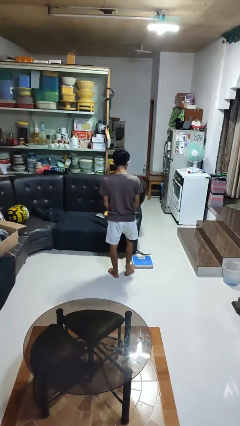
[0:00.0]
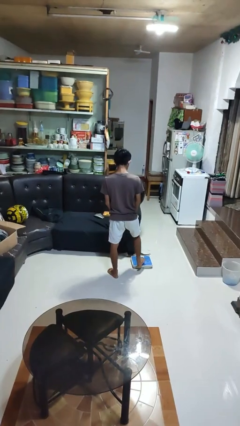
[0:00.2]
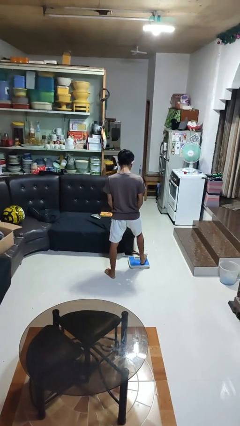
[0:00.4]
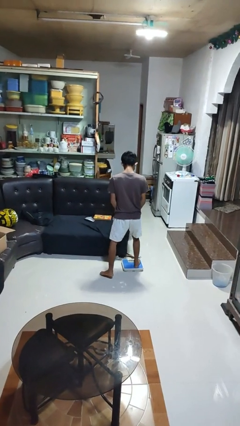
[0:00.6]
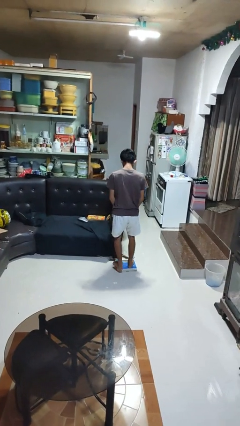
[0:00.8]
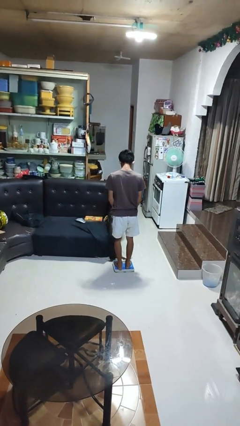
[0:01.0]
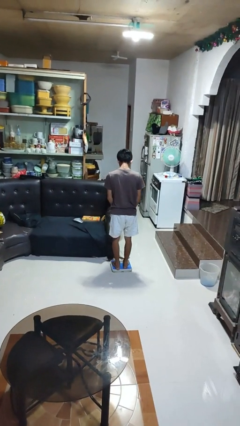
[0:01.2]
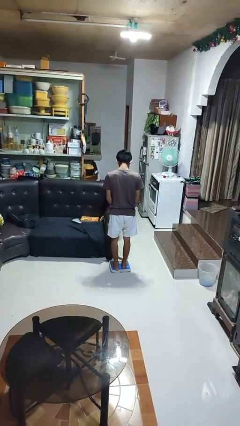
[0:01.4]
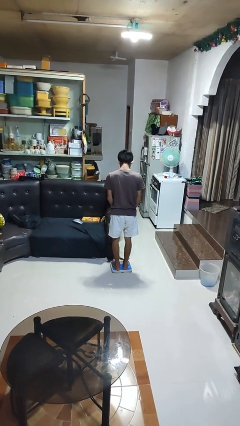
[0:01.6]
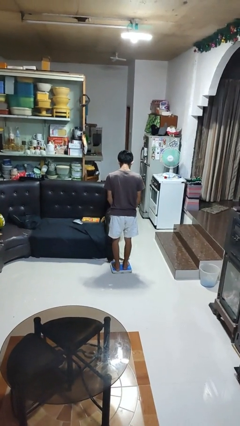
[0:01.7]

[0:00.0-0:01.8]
person uses bodyweight scale

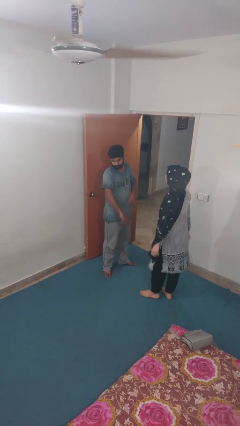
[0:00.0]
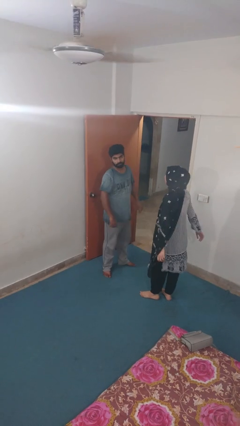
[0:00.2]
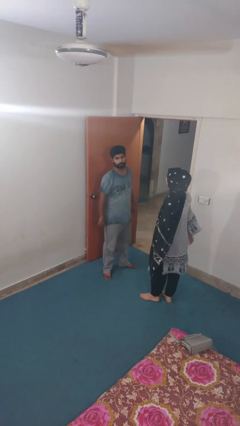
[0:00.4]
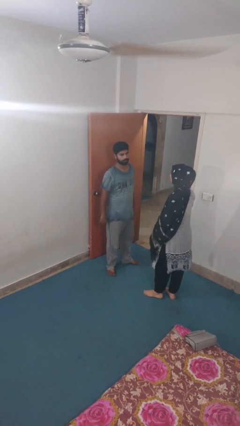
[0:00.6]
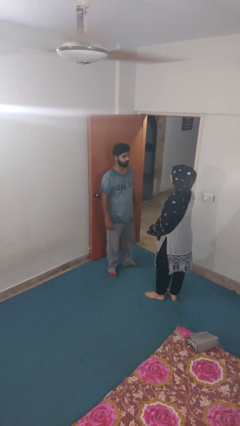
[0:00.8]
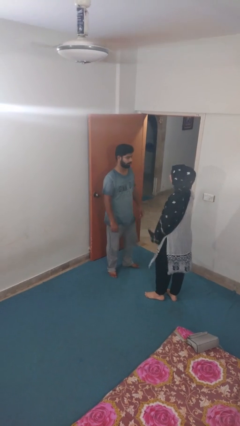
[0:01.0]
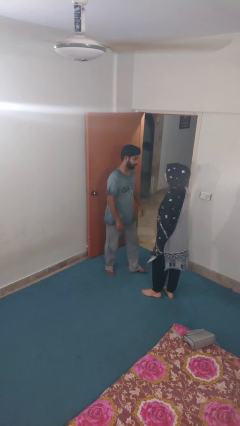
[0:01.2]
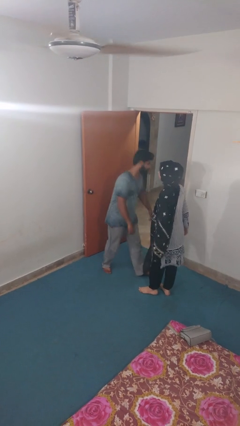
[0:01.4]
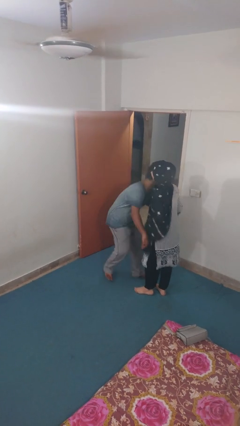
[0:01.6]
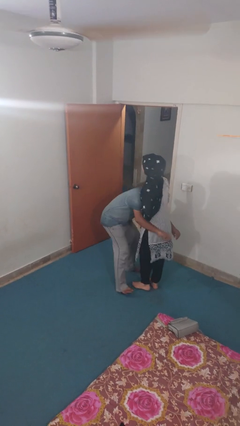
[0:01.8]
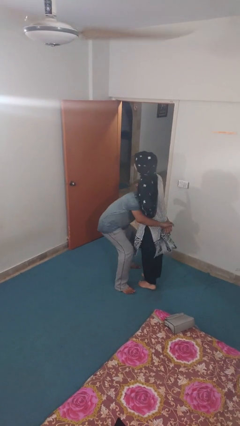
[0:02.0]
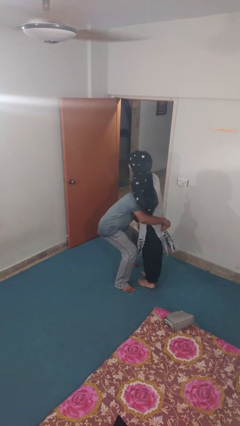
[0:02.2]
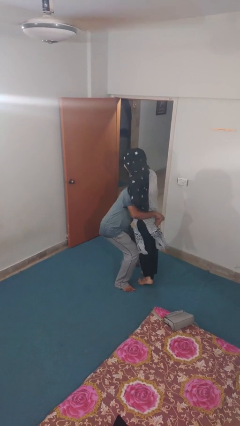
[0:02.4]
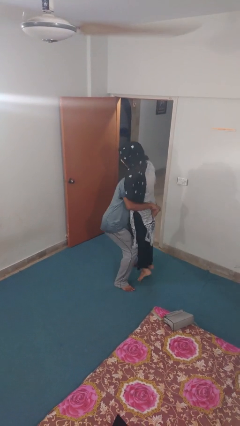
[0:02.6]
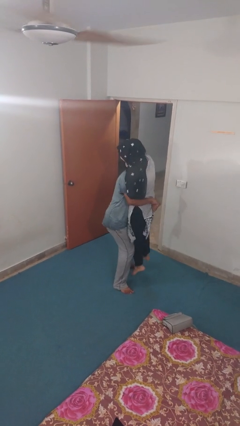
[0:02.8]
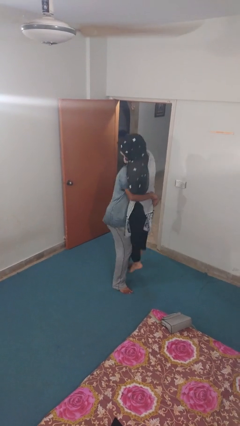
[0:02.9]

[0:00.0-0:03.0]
person picks up person

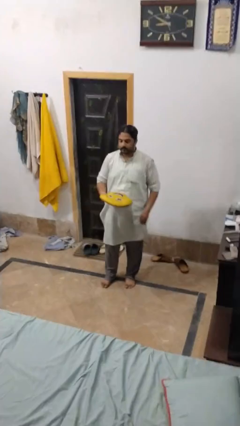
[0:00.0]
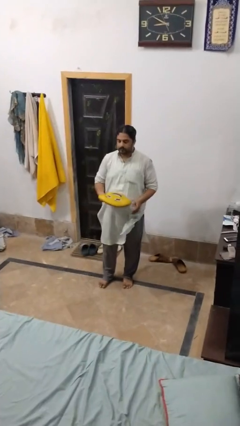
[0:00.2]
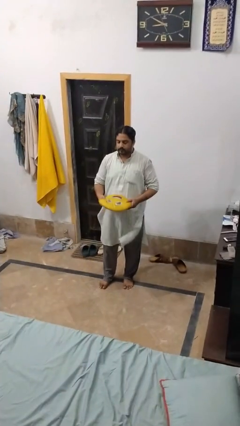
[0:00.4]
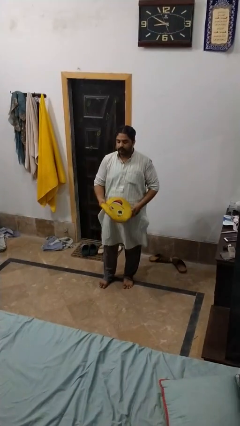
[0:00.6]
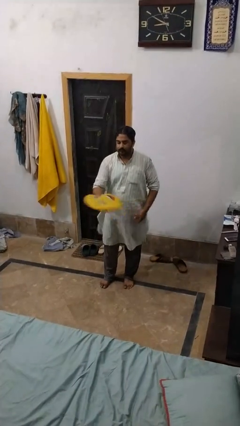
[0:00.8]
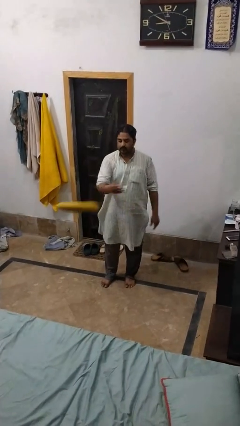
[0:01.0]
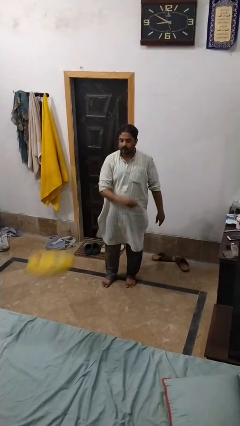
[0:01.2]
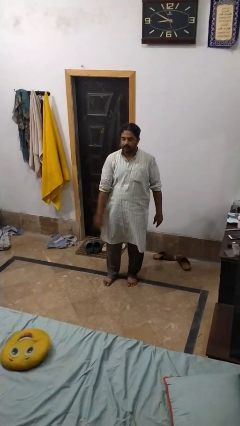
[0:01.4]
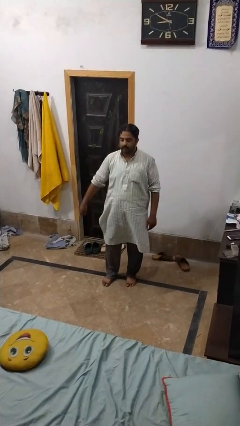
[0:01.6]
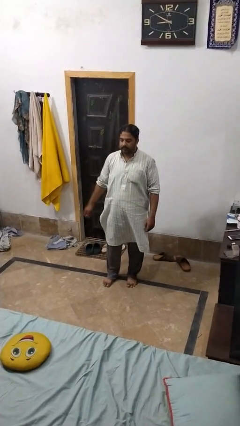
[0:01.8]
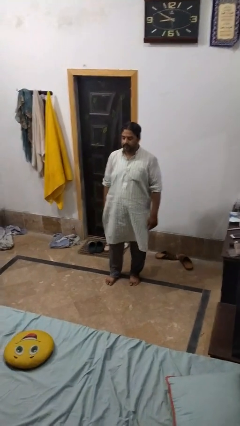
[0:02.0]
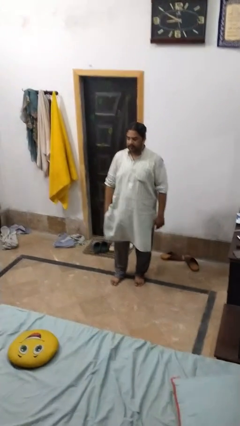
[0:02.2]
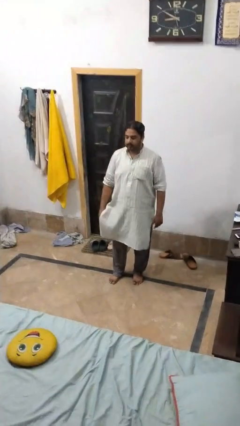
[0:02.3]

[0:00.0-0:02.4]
person throws object on bed

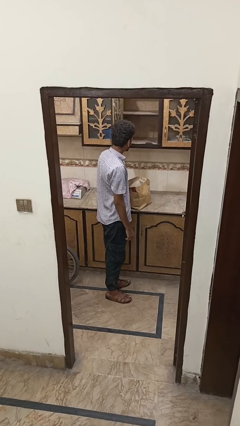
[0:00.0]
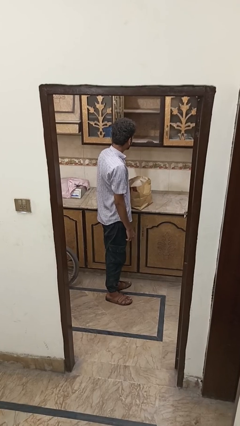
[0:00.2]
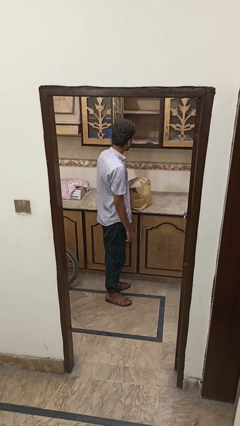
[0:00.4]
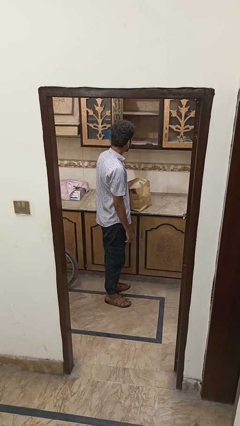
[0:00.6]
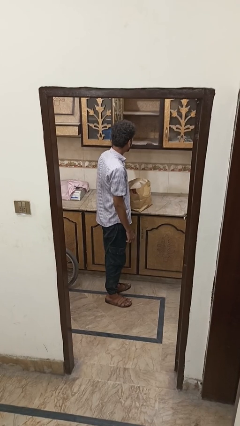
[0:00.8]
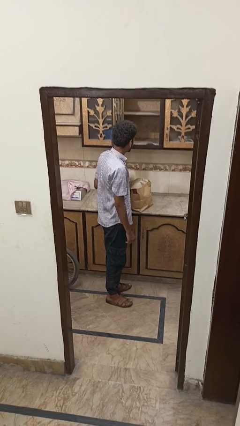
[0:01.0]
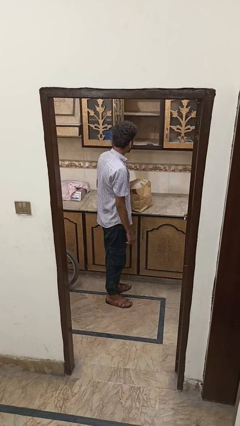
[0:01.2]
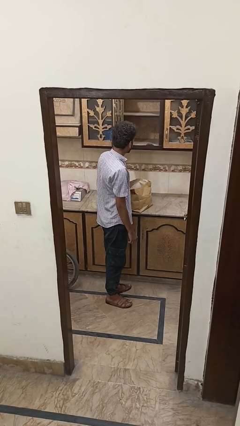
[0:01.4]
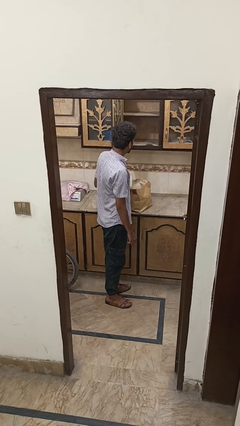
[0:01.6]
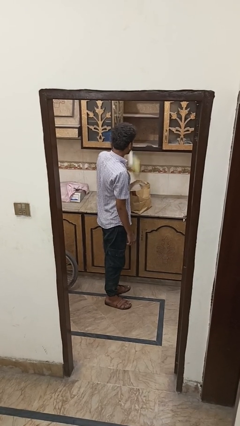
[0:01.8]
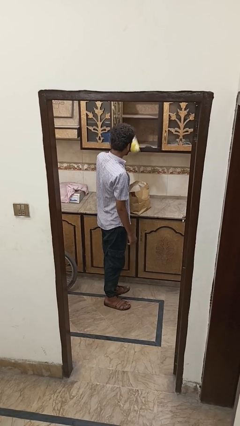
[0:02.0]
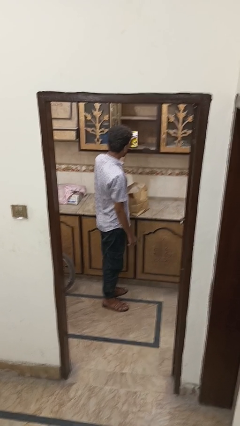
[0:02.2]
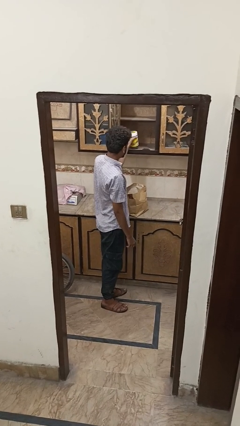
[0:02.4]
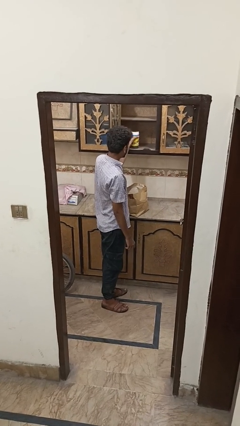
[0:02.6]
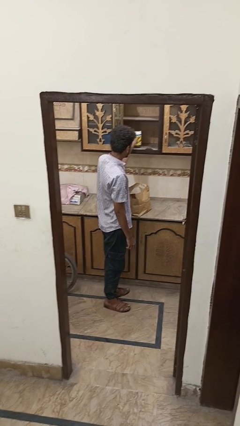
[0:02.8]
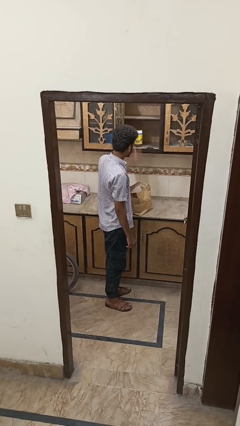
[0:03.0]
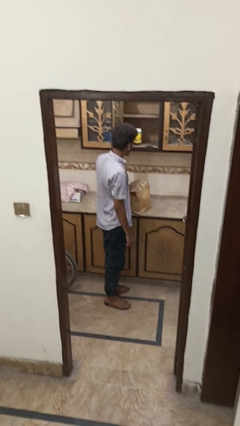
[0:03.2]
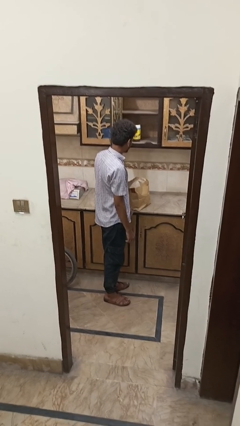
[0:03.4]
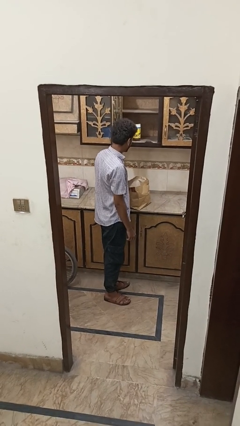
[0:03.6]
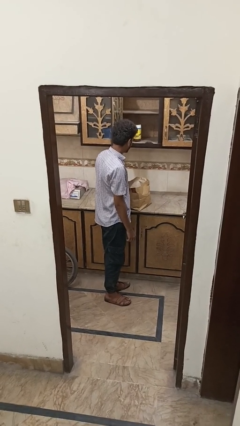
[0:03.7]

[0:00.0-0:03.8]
person covers with bedsheets

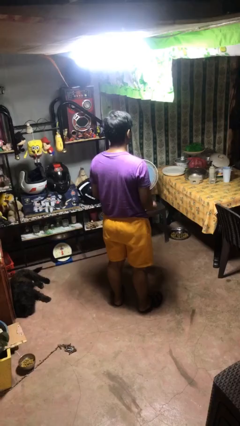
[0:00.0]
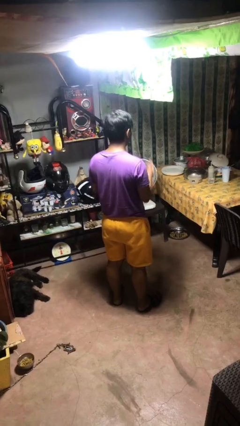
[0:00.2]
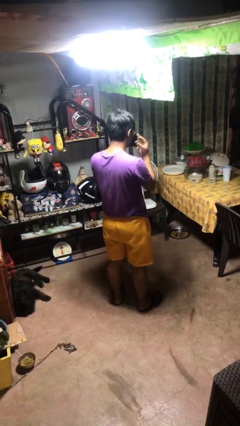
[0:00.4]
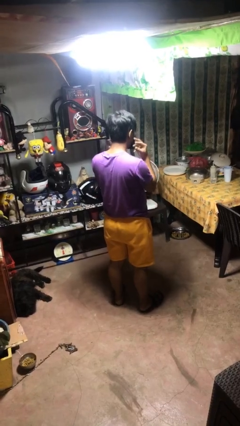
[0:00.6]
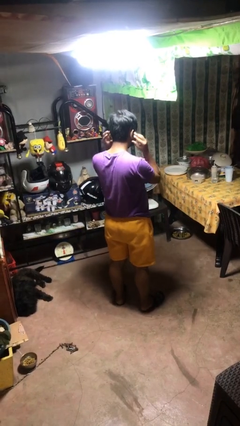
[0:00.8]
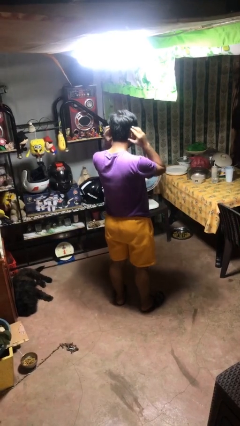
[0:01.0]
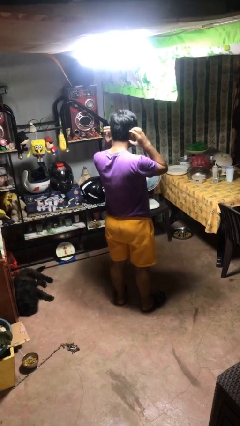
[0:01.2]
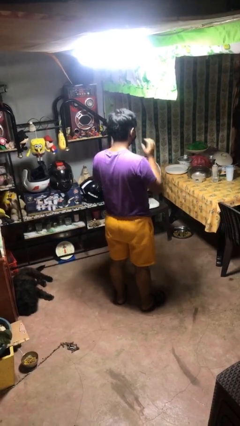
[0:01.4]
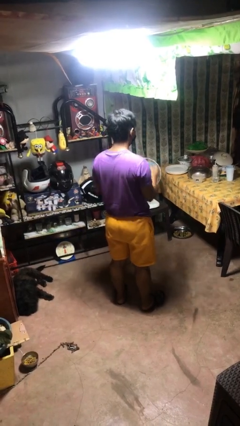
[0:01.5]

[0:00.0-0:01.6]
person puts on facemask

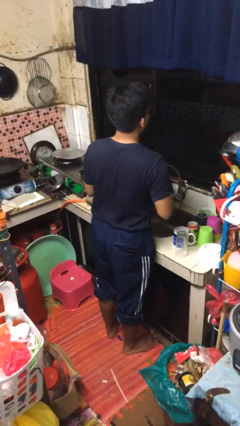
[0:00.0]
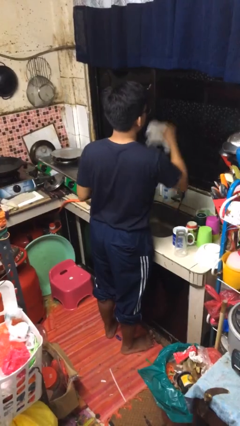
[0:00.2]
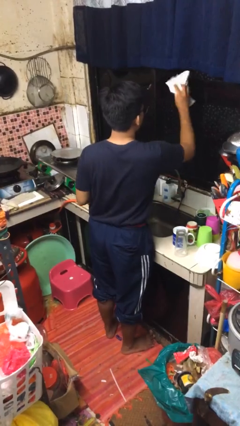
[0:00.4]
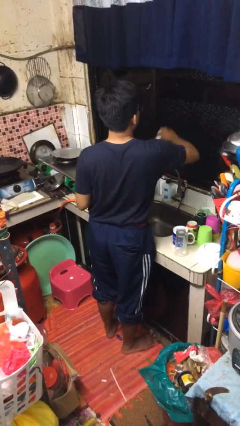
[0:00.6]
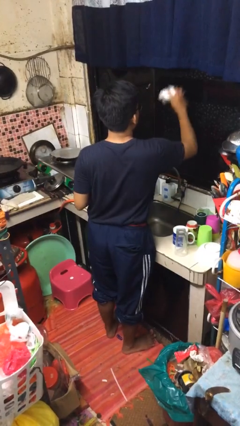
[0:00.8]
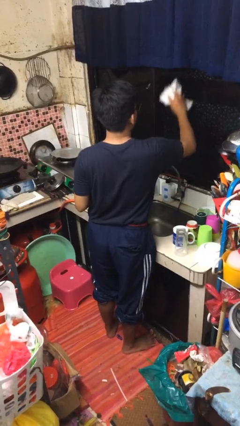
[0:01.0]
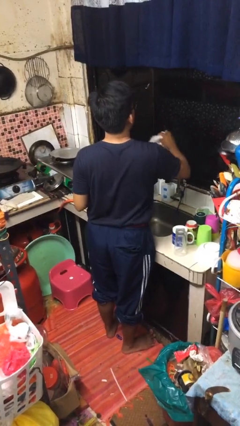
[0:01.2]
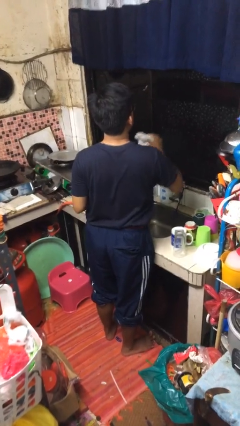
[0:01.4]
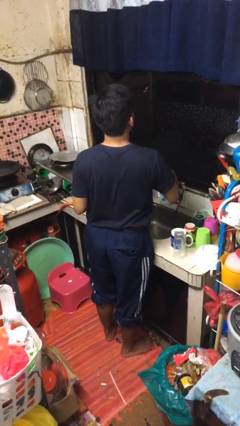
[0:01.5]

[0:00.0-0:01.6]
person washes window

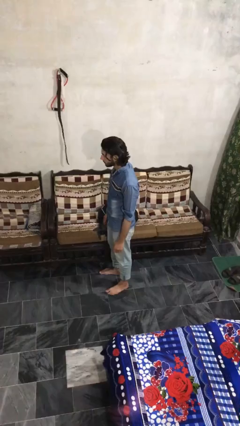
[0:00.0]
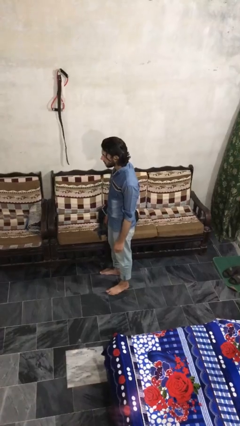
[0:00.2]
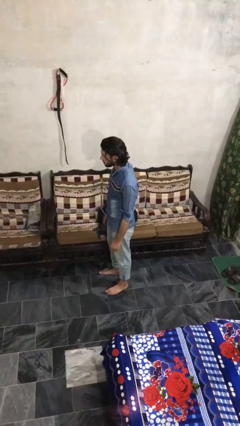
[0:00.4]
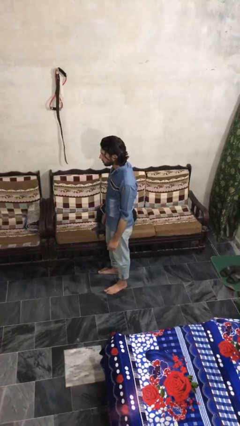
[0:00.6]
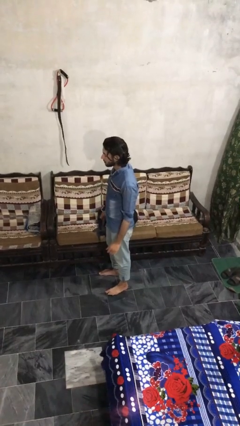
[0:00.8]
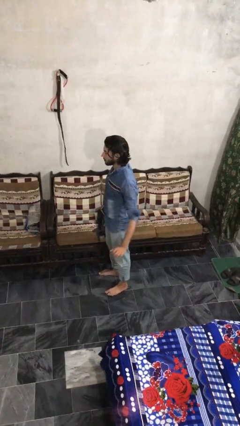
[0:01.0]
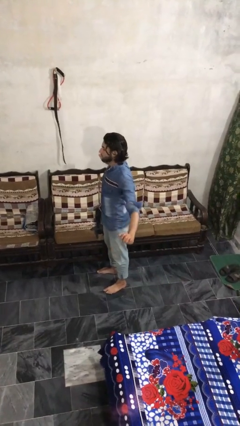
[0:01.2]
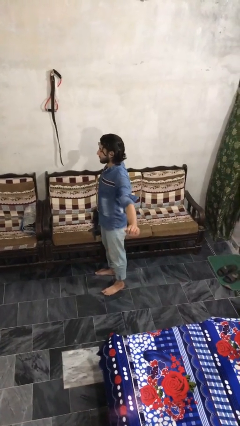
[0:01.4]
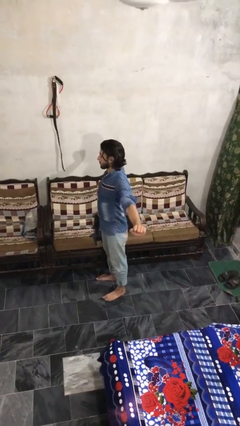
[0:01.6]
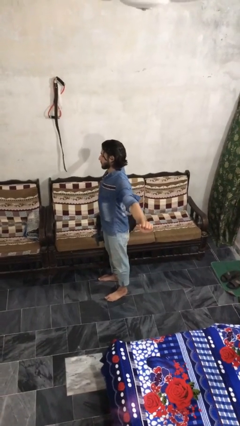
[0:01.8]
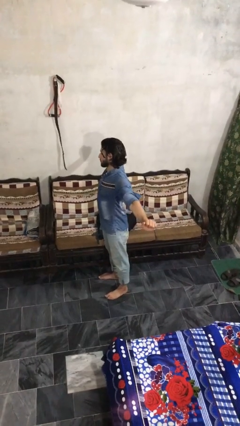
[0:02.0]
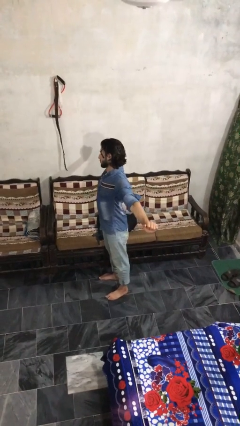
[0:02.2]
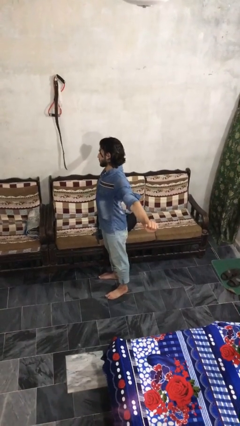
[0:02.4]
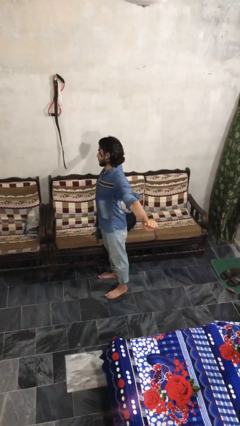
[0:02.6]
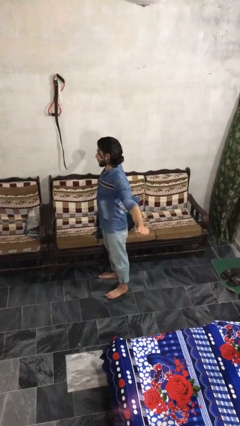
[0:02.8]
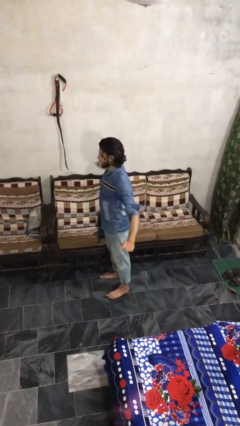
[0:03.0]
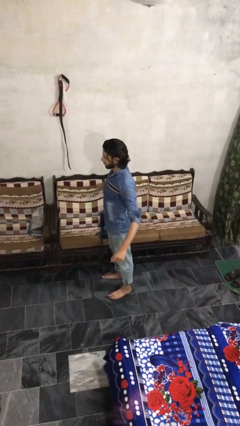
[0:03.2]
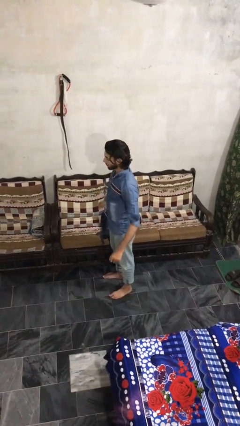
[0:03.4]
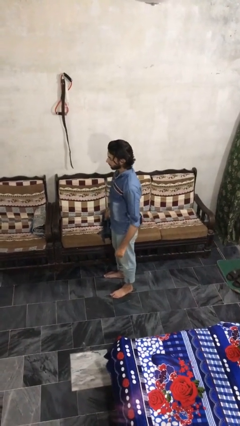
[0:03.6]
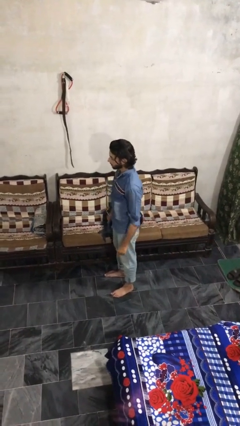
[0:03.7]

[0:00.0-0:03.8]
person stretches arms to side
